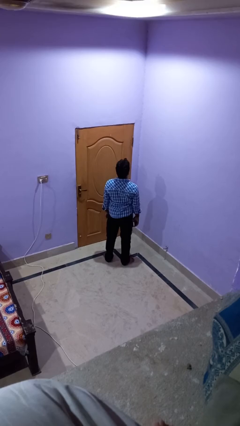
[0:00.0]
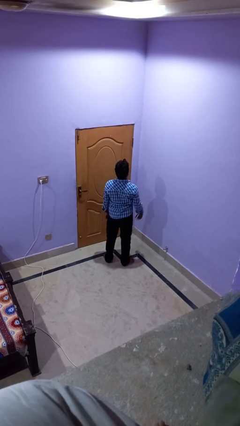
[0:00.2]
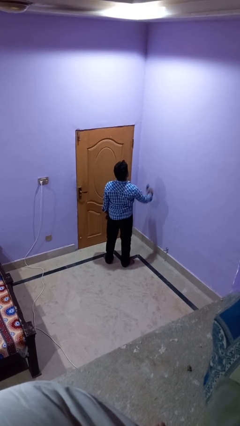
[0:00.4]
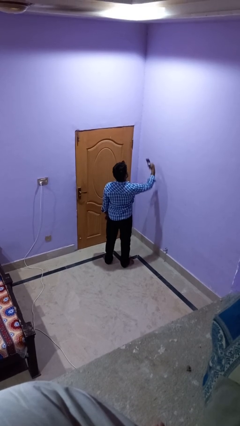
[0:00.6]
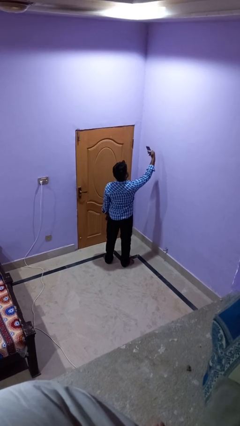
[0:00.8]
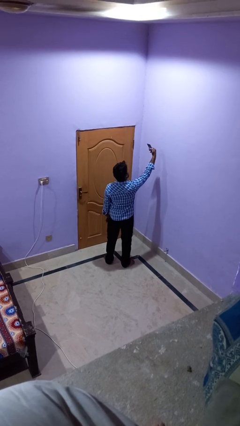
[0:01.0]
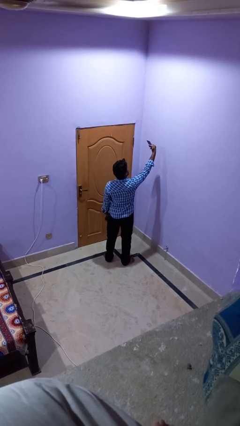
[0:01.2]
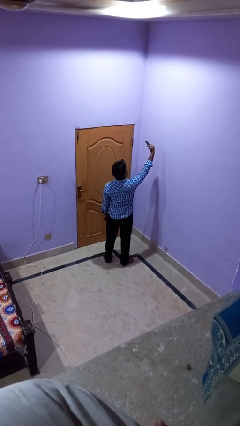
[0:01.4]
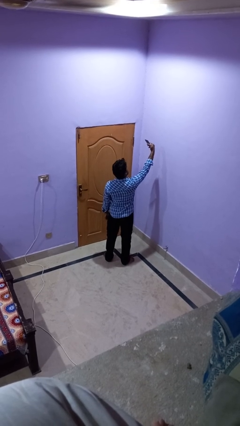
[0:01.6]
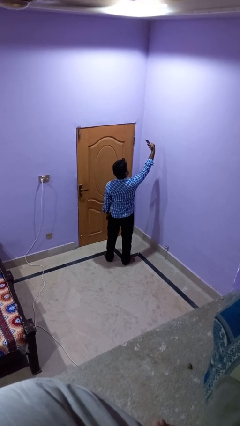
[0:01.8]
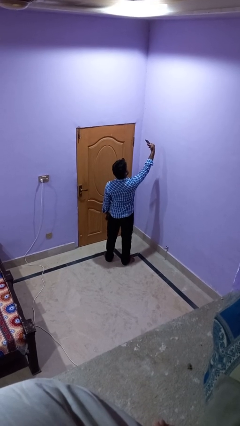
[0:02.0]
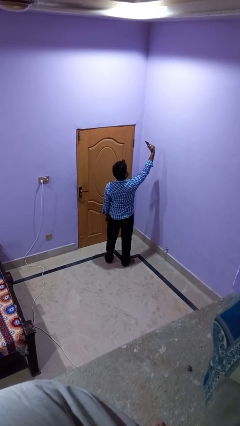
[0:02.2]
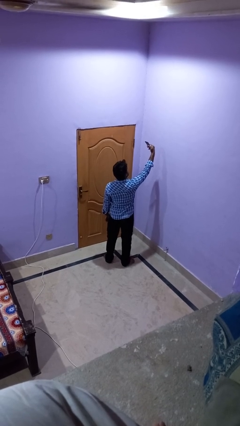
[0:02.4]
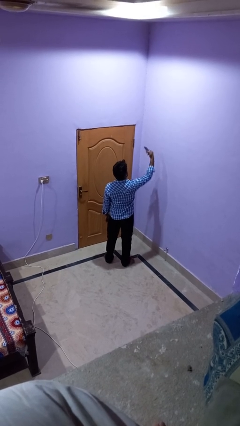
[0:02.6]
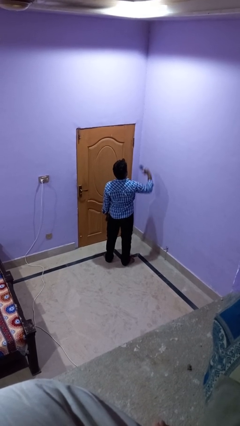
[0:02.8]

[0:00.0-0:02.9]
person takes selfie

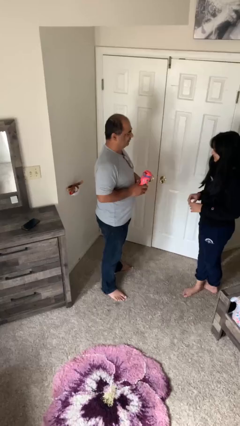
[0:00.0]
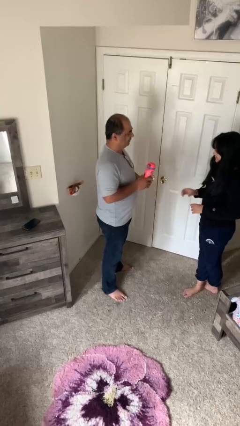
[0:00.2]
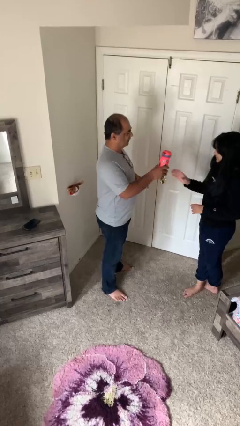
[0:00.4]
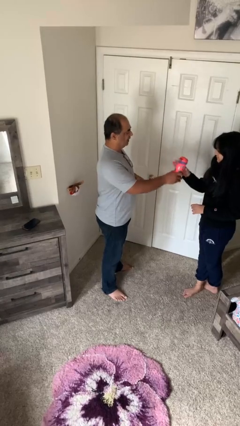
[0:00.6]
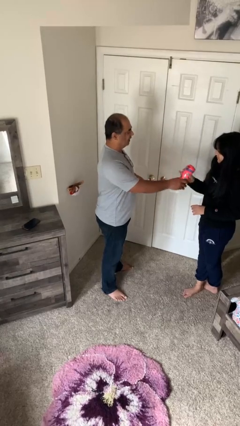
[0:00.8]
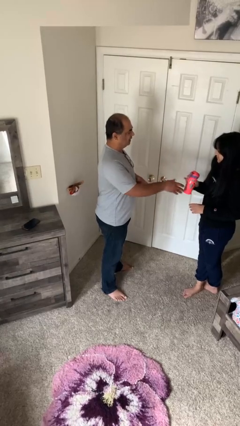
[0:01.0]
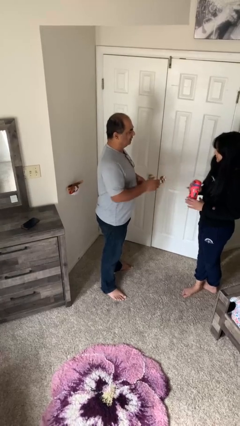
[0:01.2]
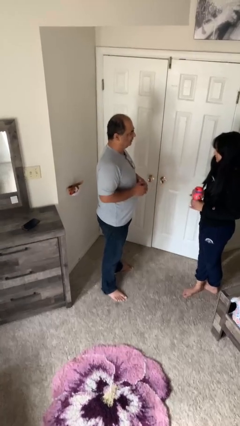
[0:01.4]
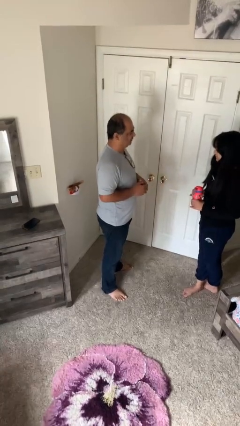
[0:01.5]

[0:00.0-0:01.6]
person transfers object to person

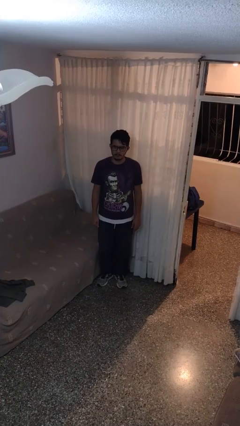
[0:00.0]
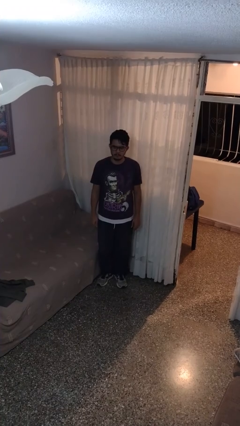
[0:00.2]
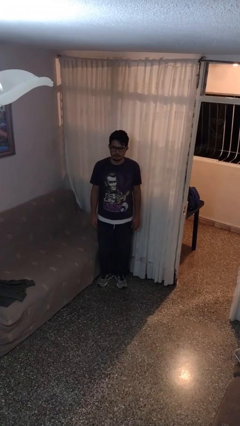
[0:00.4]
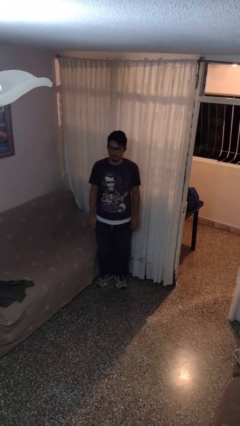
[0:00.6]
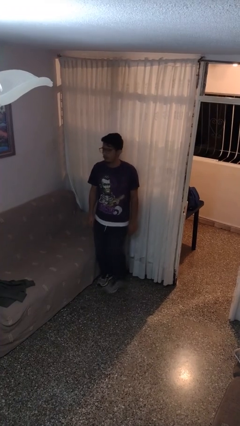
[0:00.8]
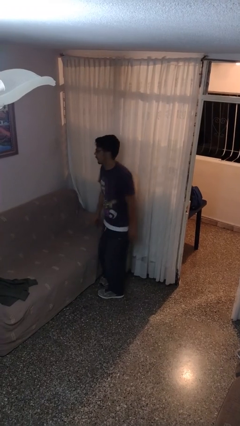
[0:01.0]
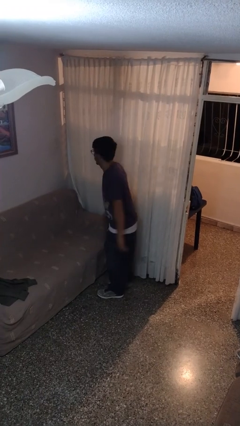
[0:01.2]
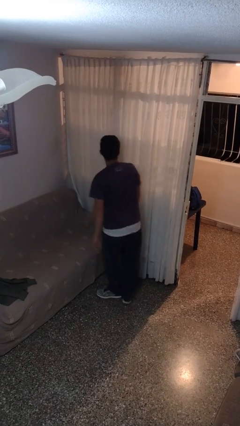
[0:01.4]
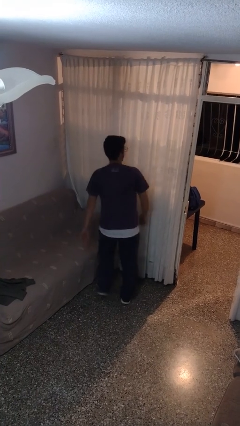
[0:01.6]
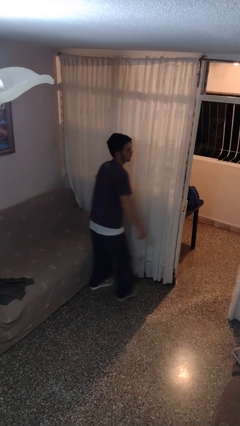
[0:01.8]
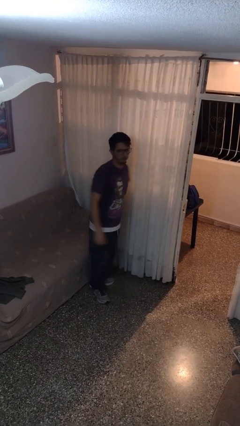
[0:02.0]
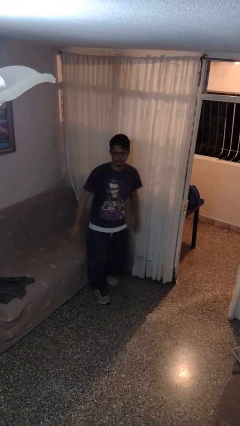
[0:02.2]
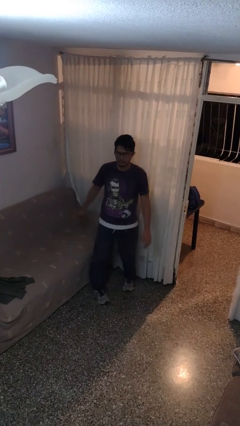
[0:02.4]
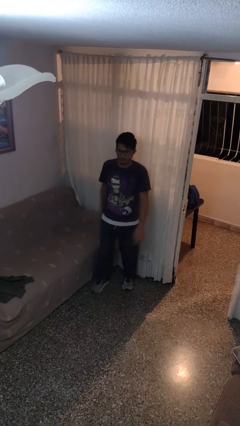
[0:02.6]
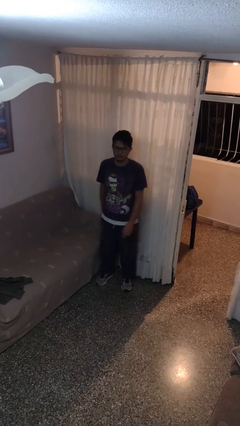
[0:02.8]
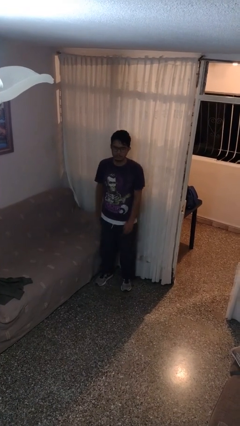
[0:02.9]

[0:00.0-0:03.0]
person twirls

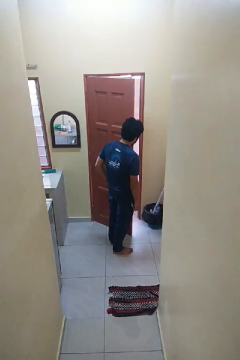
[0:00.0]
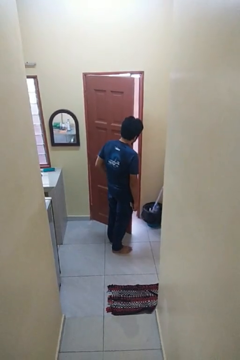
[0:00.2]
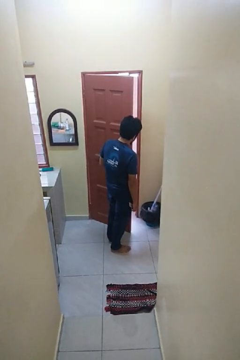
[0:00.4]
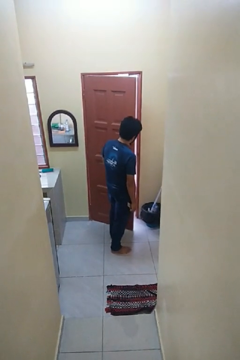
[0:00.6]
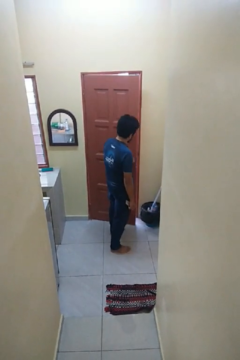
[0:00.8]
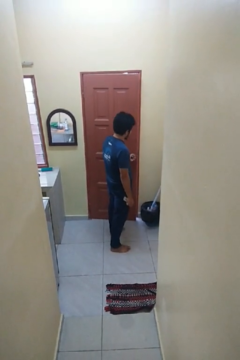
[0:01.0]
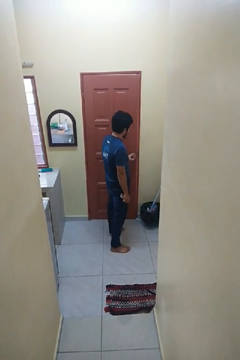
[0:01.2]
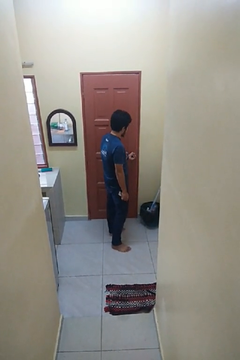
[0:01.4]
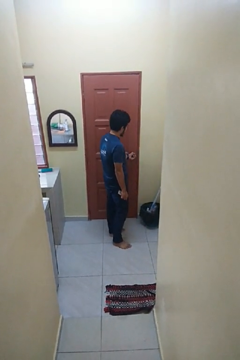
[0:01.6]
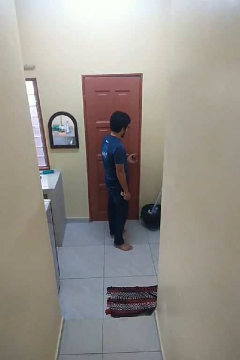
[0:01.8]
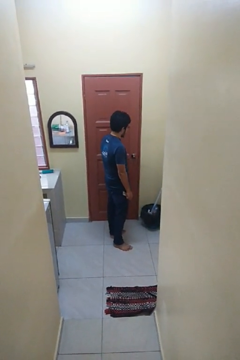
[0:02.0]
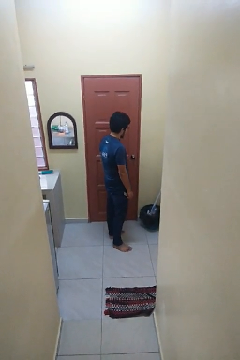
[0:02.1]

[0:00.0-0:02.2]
person closes facility door

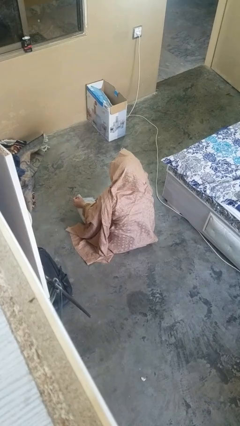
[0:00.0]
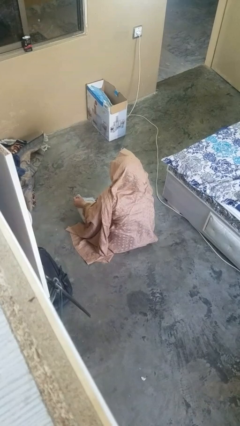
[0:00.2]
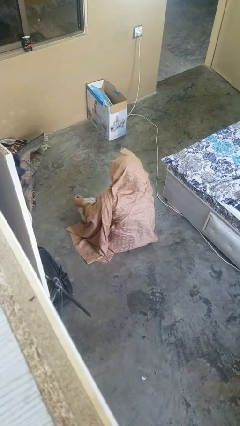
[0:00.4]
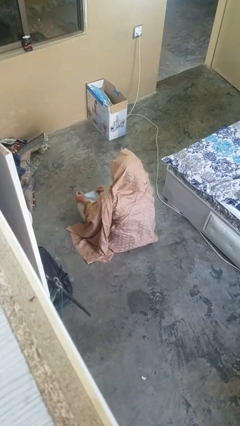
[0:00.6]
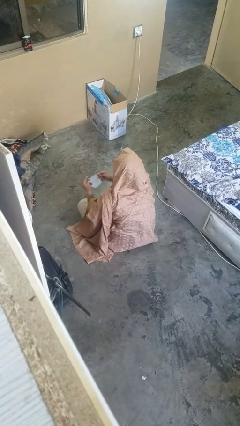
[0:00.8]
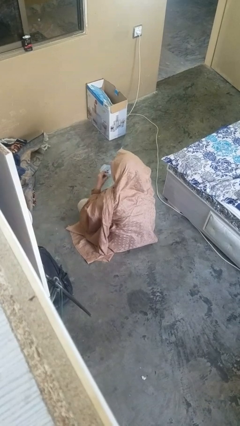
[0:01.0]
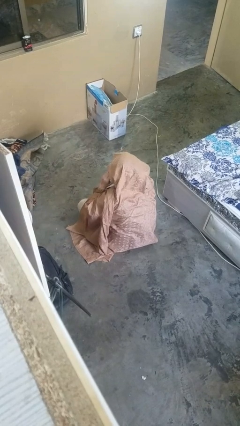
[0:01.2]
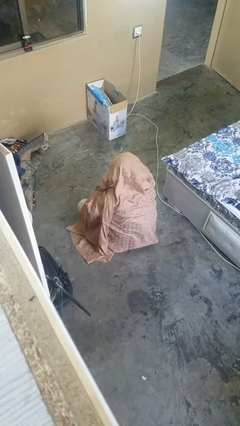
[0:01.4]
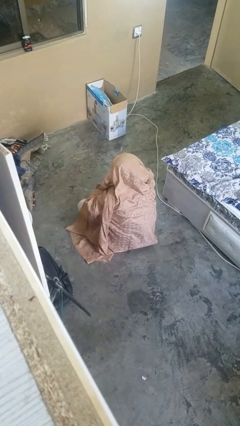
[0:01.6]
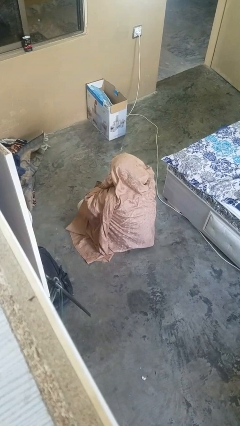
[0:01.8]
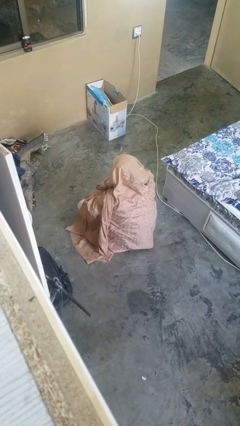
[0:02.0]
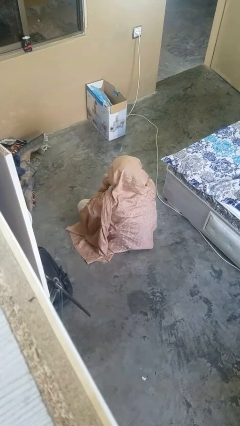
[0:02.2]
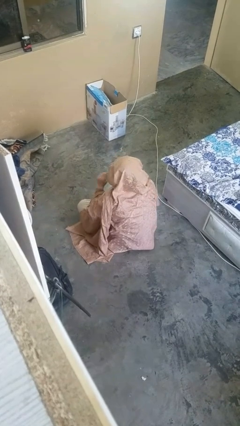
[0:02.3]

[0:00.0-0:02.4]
person puts on facemask

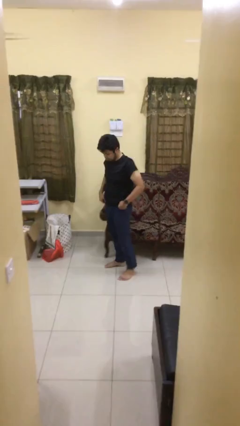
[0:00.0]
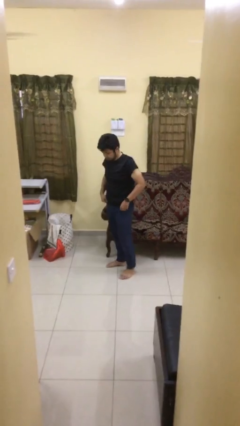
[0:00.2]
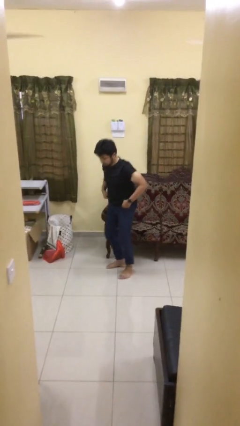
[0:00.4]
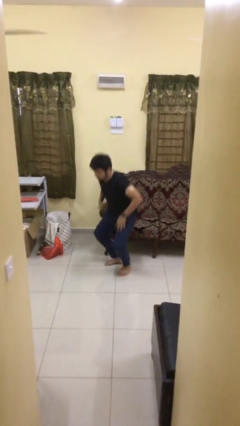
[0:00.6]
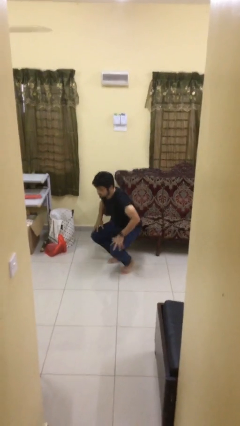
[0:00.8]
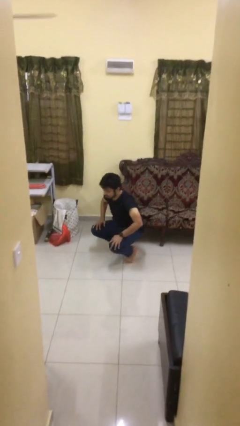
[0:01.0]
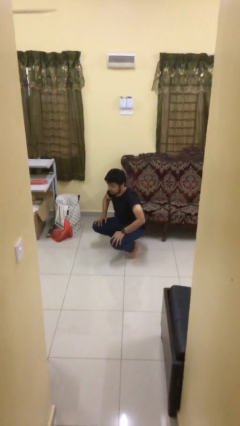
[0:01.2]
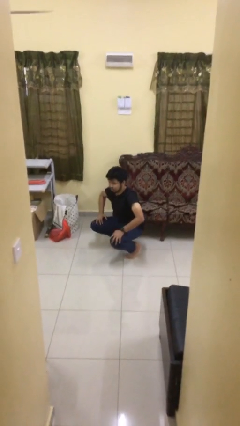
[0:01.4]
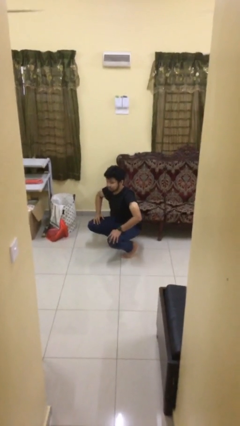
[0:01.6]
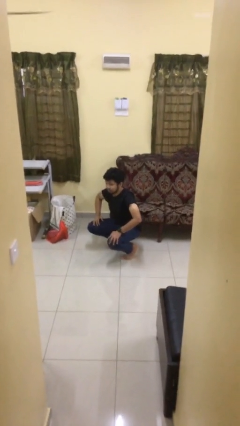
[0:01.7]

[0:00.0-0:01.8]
person squats

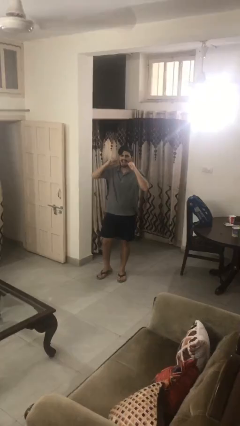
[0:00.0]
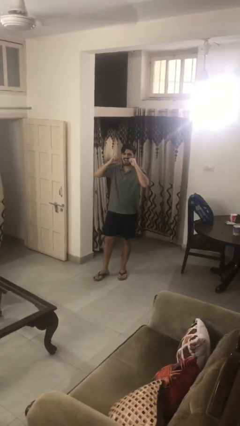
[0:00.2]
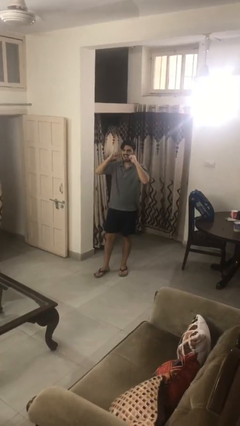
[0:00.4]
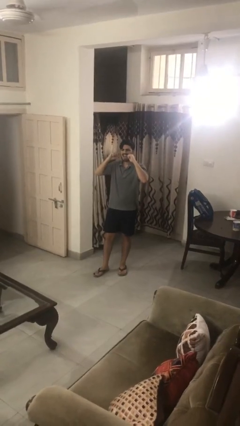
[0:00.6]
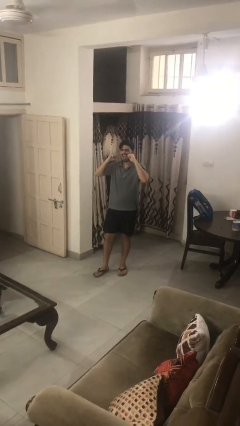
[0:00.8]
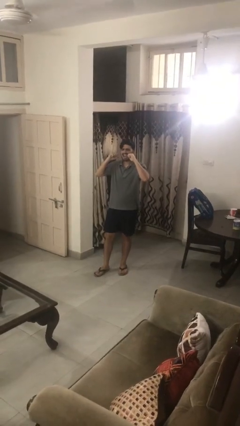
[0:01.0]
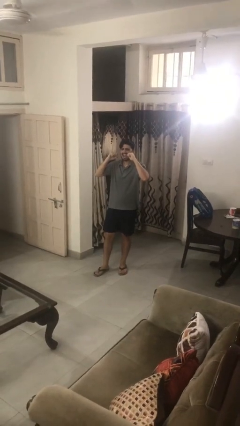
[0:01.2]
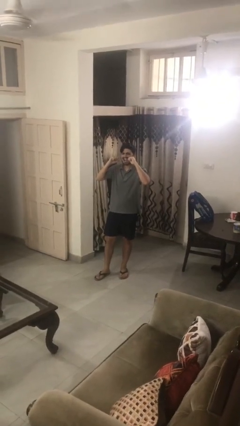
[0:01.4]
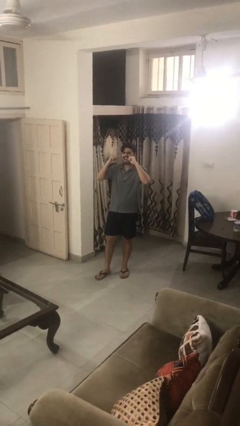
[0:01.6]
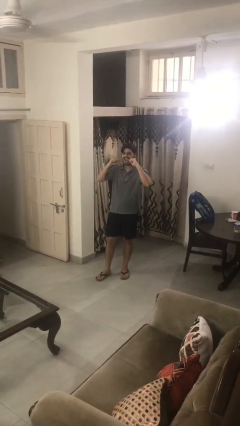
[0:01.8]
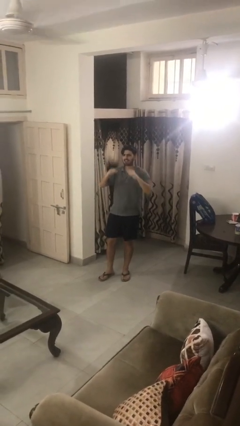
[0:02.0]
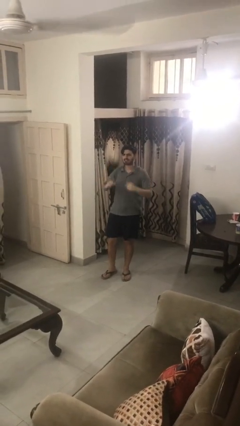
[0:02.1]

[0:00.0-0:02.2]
person flosses

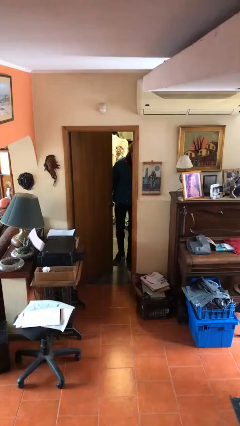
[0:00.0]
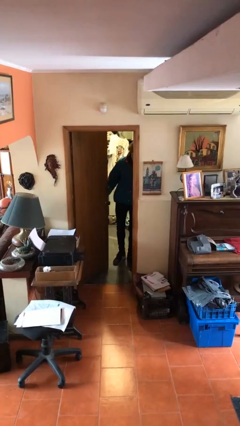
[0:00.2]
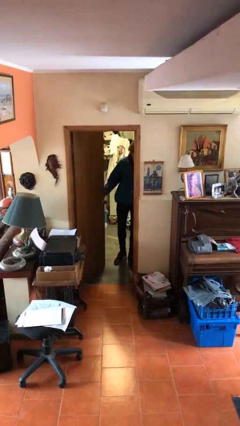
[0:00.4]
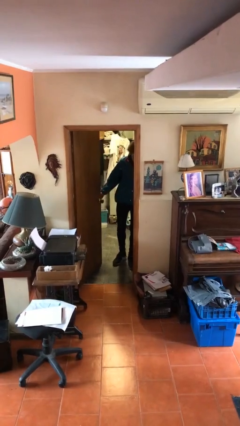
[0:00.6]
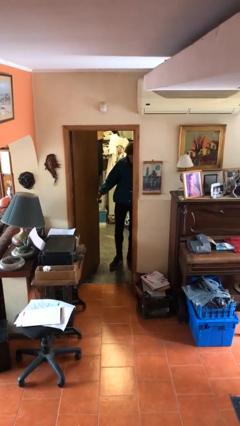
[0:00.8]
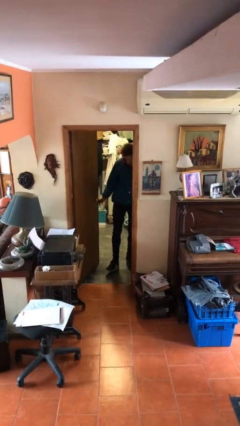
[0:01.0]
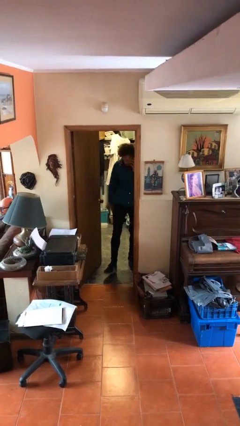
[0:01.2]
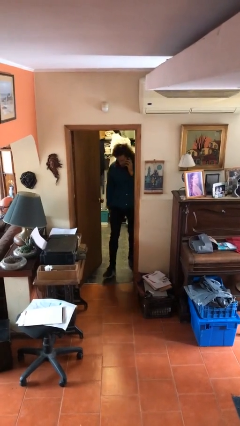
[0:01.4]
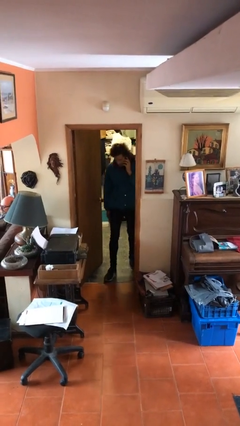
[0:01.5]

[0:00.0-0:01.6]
person opens facility door
